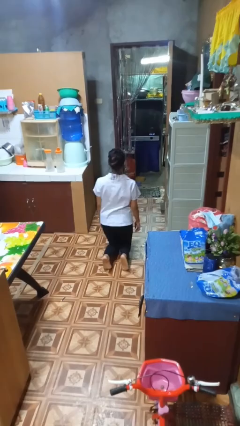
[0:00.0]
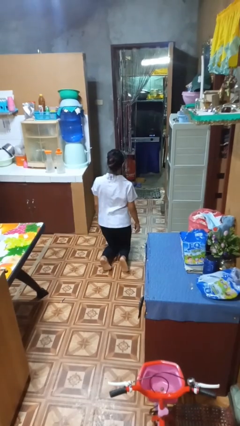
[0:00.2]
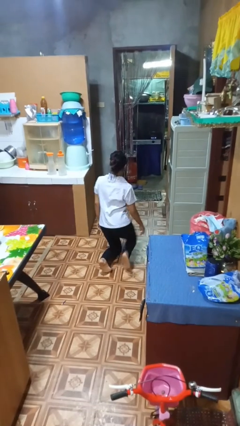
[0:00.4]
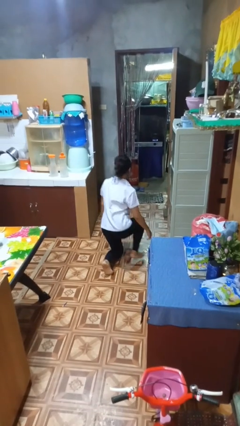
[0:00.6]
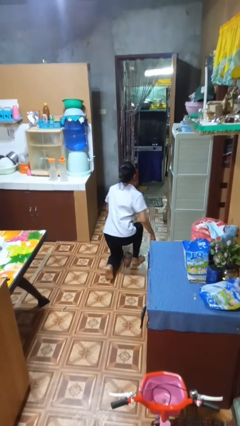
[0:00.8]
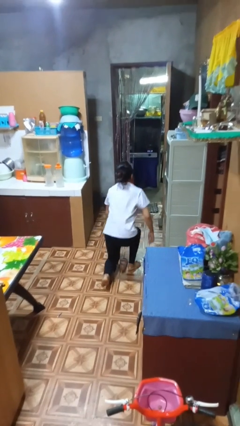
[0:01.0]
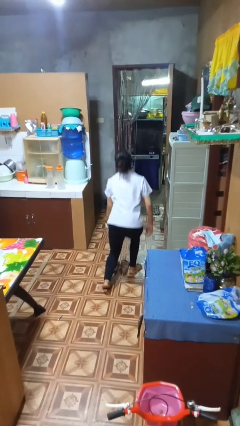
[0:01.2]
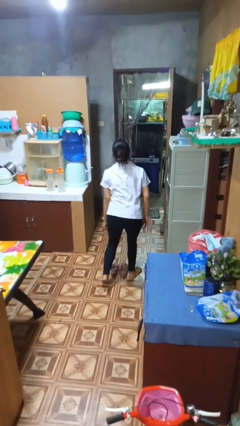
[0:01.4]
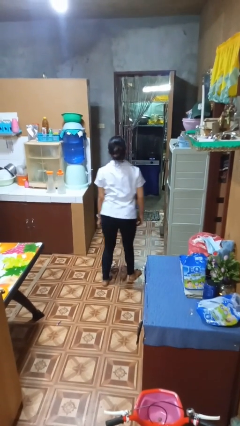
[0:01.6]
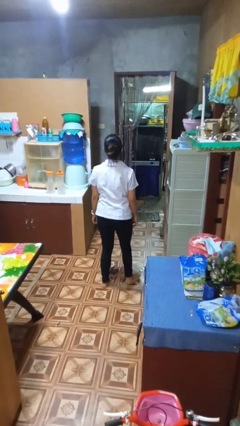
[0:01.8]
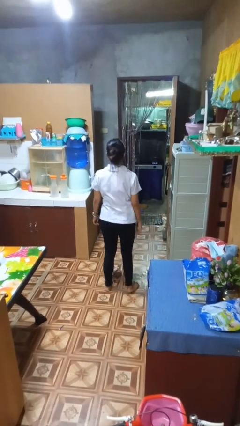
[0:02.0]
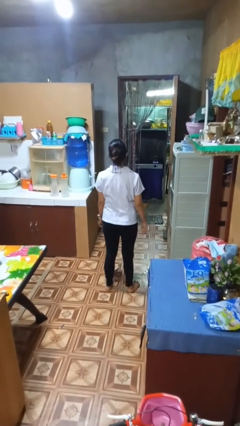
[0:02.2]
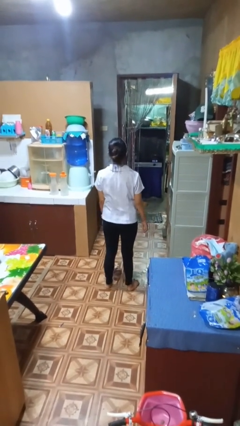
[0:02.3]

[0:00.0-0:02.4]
person stands up from floor

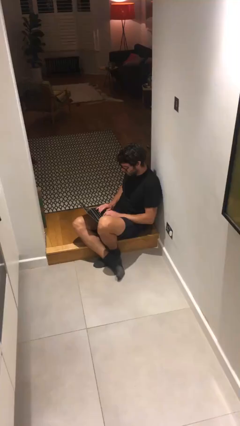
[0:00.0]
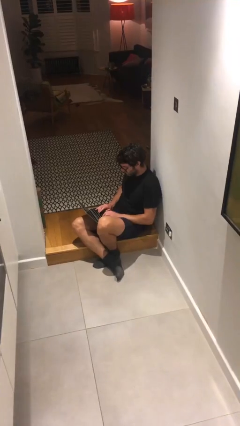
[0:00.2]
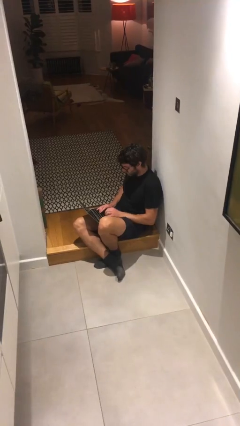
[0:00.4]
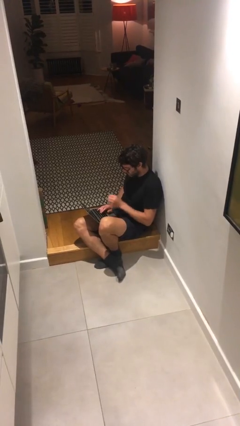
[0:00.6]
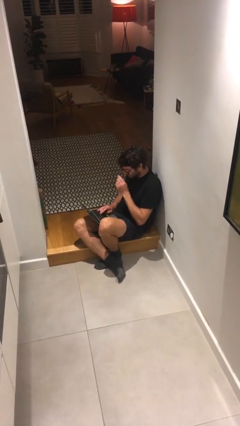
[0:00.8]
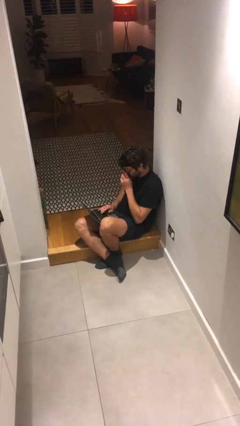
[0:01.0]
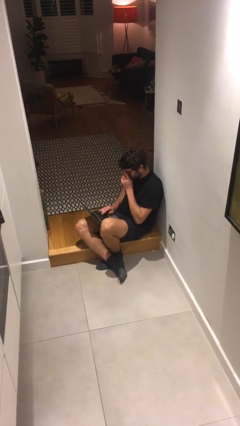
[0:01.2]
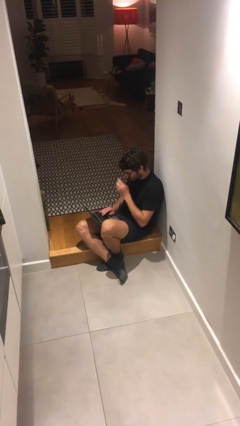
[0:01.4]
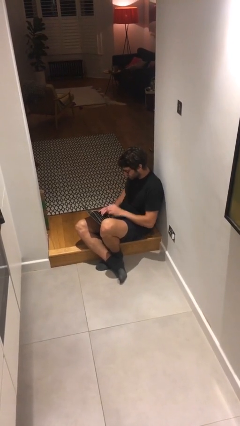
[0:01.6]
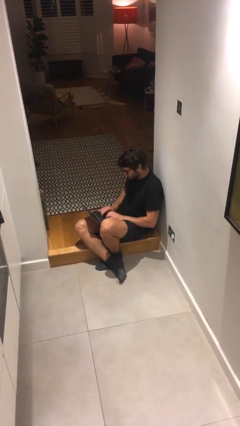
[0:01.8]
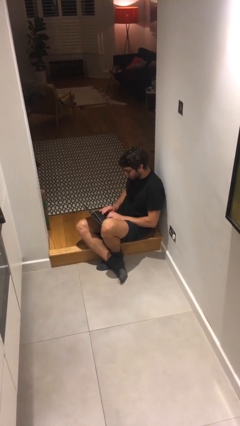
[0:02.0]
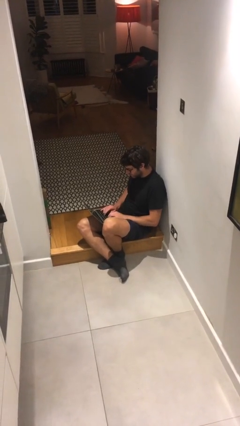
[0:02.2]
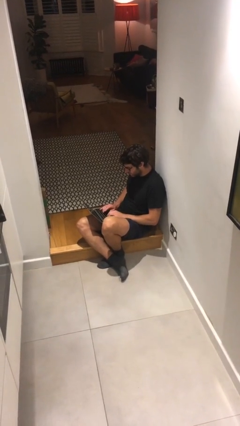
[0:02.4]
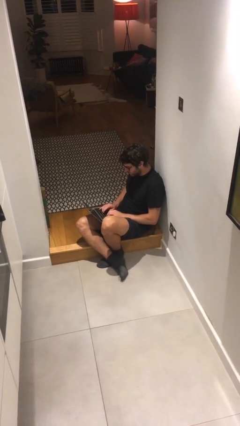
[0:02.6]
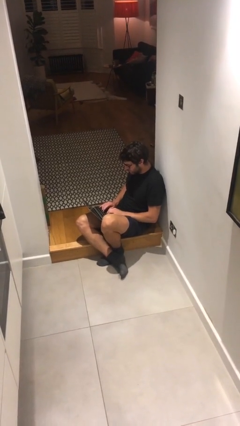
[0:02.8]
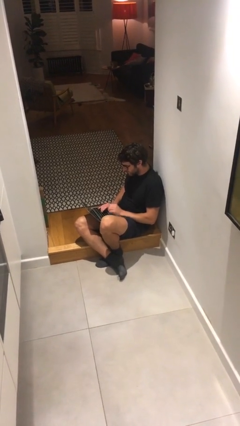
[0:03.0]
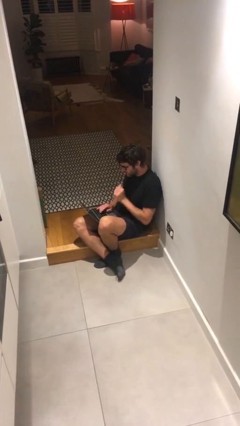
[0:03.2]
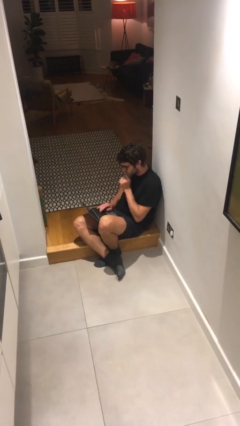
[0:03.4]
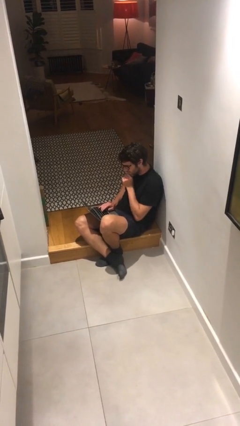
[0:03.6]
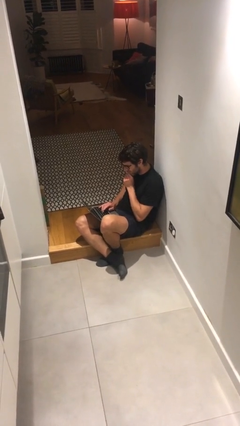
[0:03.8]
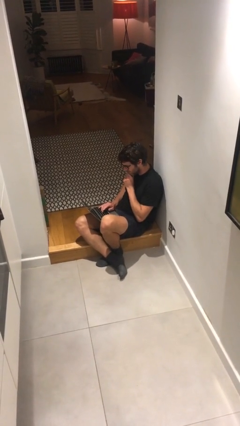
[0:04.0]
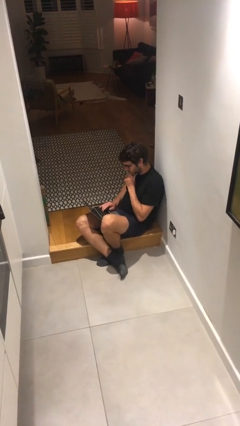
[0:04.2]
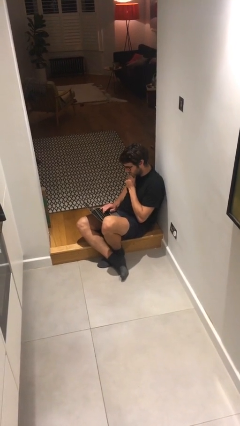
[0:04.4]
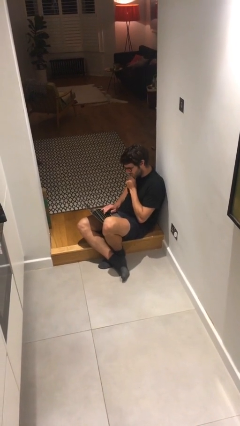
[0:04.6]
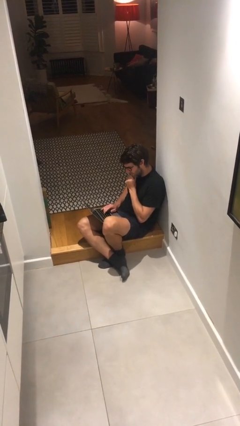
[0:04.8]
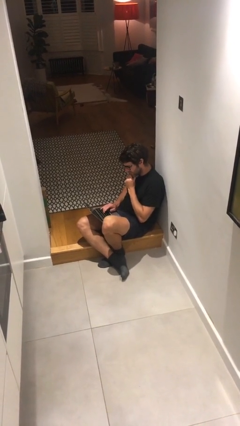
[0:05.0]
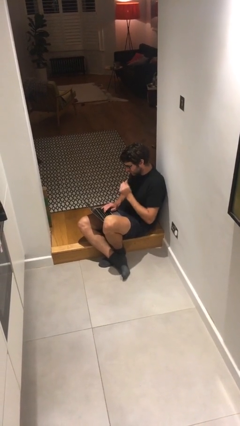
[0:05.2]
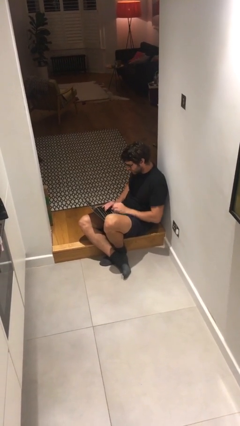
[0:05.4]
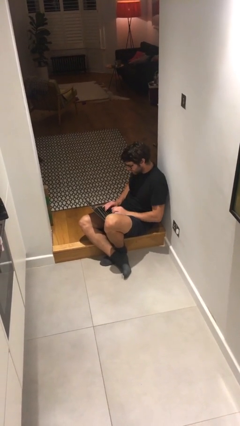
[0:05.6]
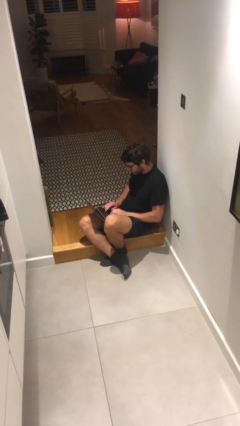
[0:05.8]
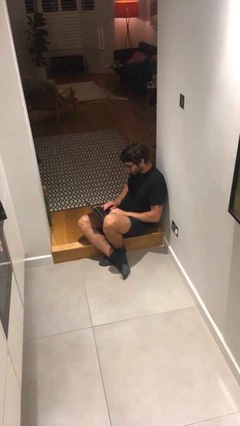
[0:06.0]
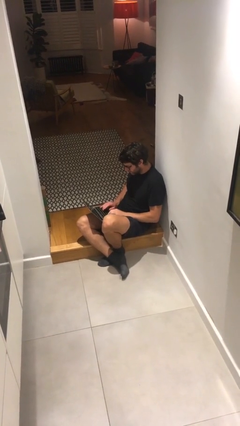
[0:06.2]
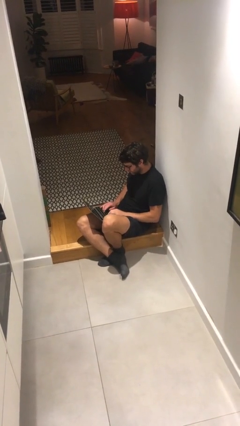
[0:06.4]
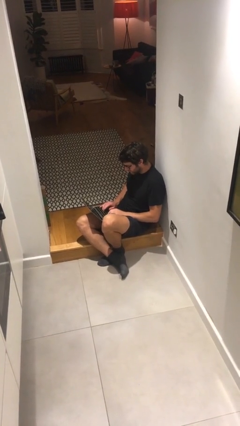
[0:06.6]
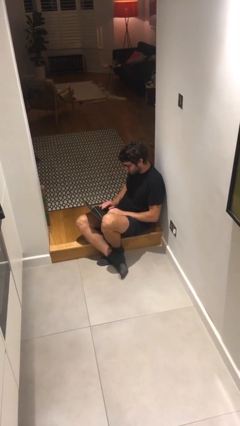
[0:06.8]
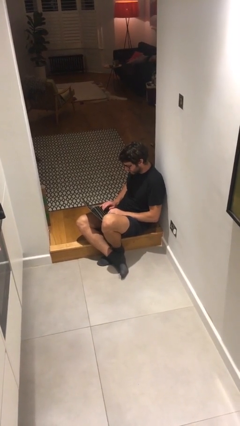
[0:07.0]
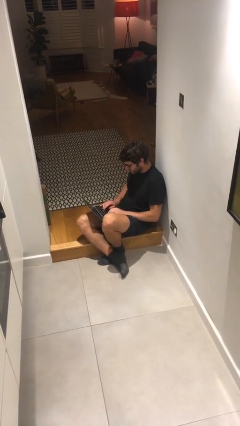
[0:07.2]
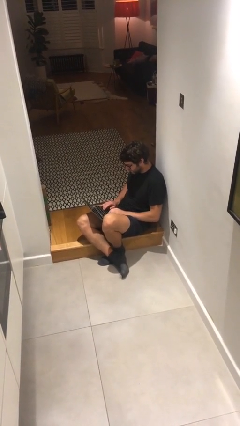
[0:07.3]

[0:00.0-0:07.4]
person interacts with laptop

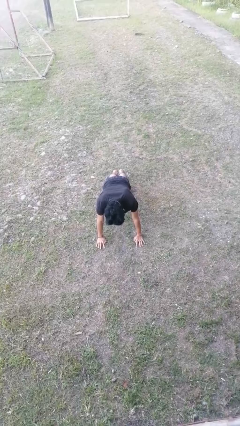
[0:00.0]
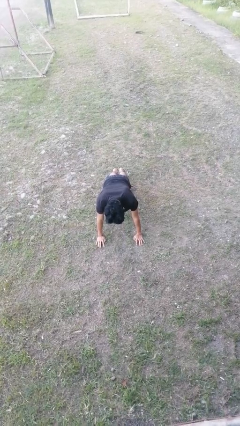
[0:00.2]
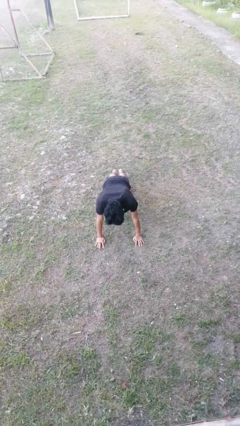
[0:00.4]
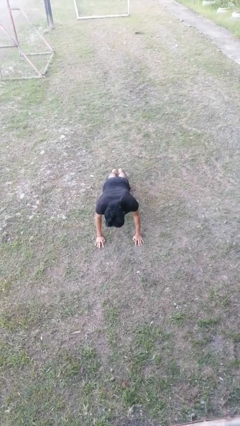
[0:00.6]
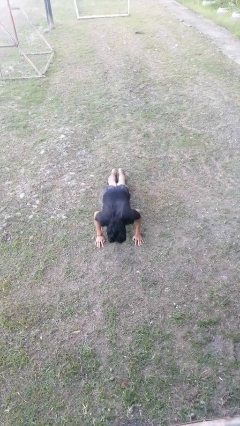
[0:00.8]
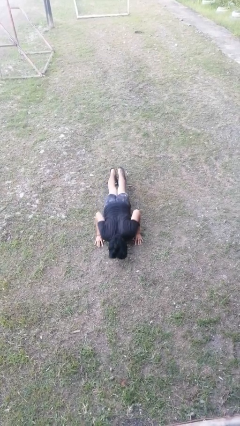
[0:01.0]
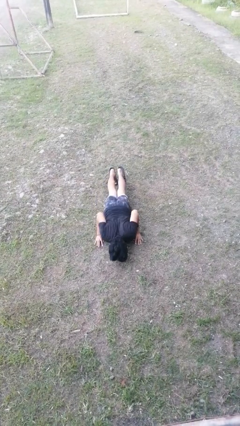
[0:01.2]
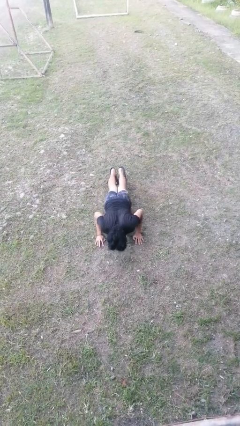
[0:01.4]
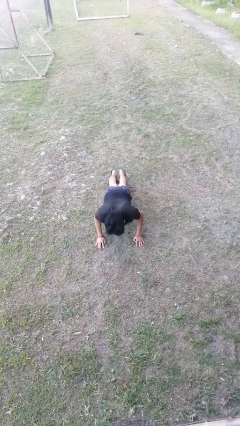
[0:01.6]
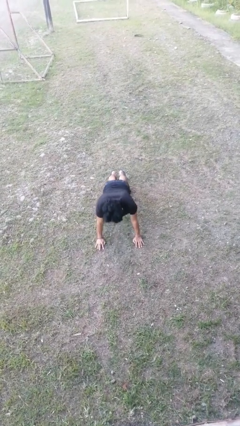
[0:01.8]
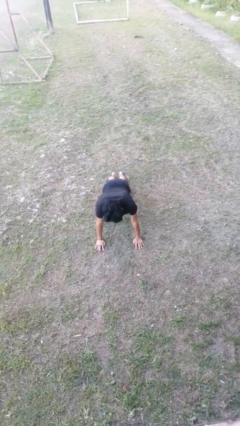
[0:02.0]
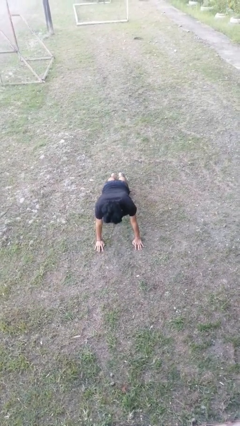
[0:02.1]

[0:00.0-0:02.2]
person exercises with pushup

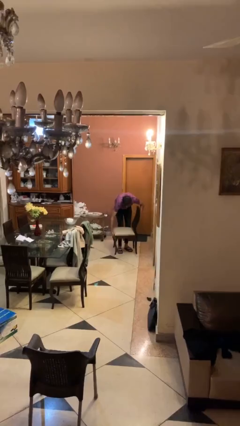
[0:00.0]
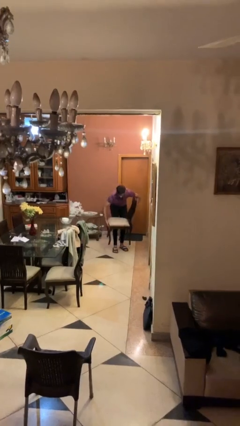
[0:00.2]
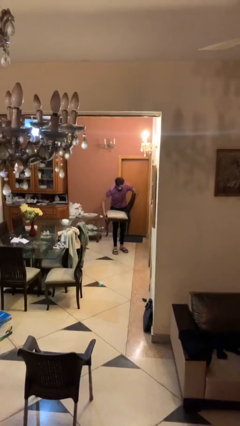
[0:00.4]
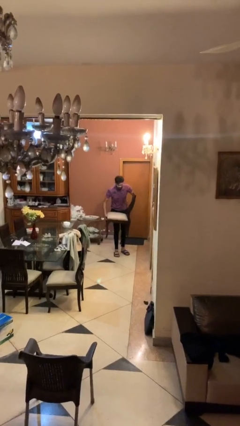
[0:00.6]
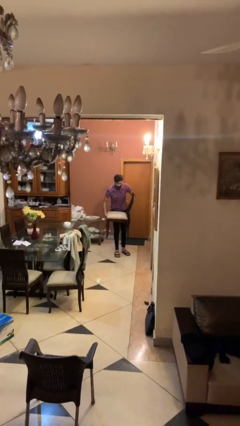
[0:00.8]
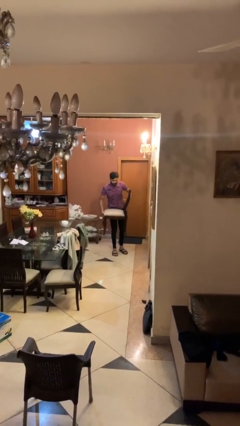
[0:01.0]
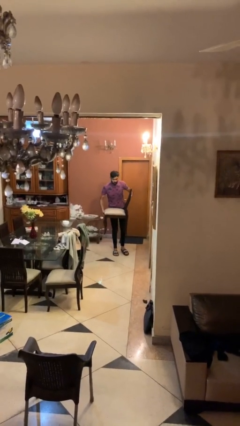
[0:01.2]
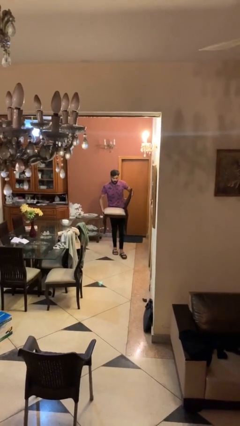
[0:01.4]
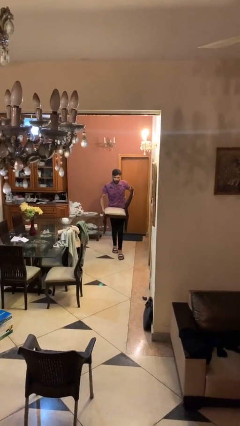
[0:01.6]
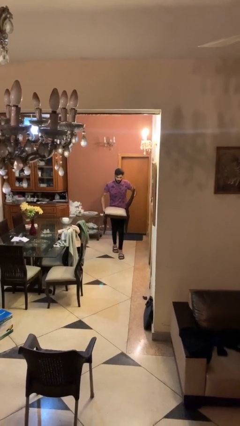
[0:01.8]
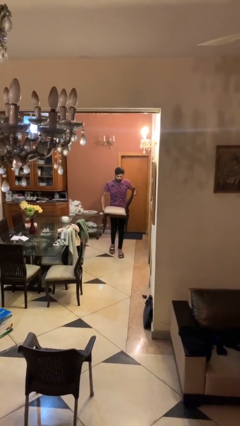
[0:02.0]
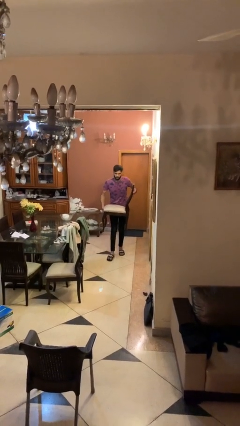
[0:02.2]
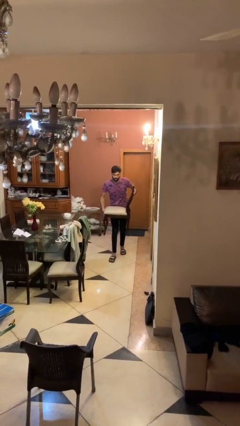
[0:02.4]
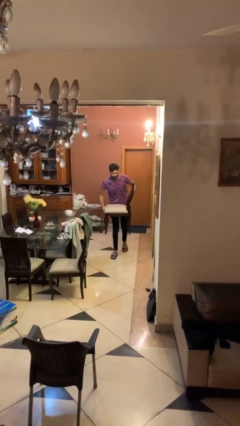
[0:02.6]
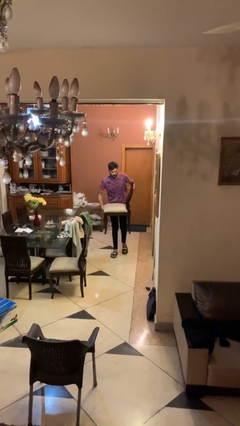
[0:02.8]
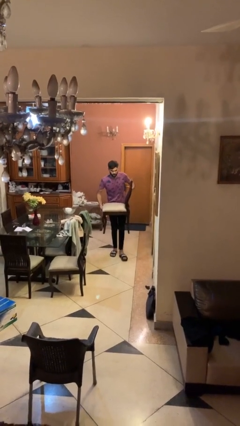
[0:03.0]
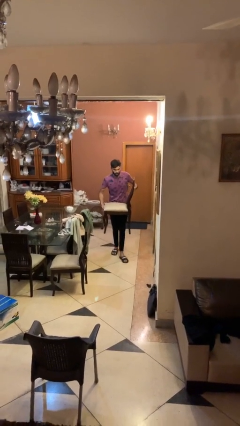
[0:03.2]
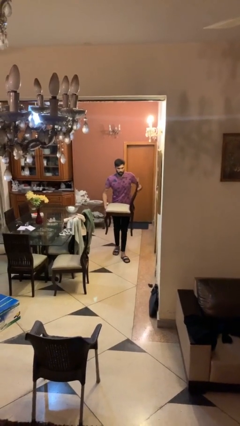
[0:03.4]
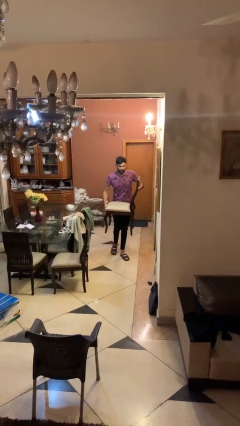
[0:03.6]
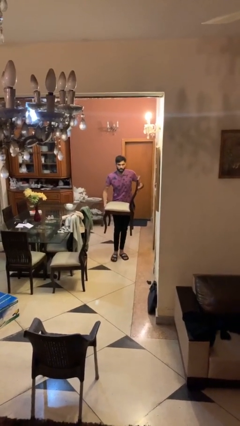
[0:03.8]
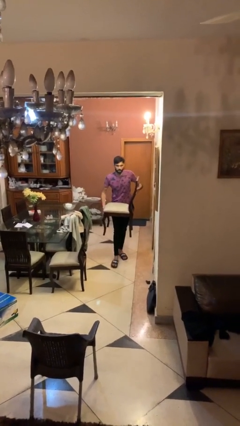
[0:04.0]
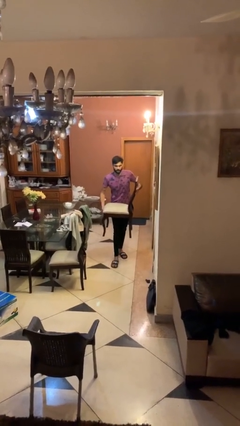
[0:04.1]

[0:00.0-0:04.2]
person carries heavy object

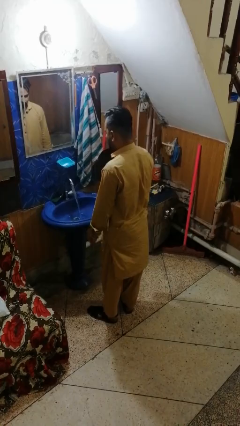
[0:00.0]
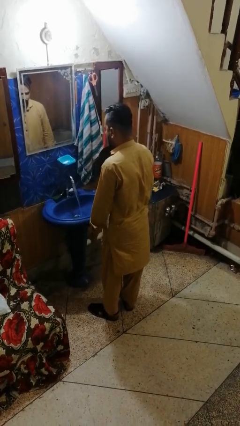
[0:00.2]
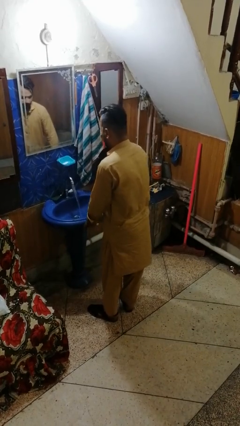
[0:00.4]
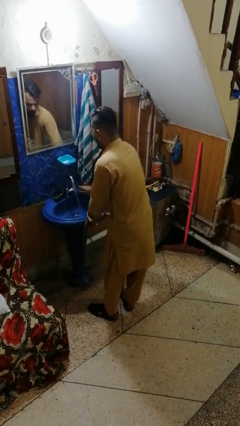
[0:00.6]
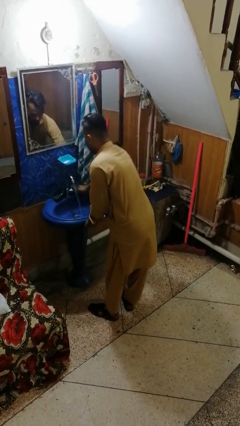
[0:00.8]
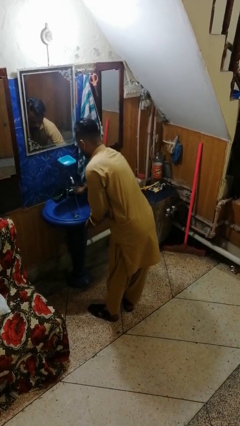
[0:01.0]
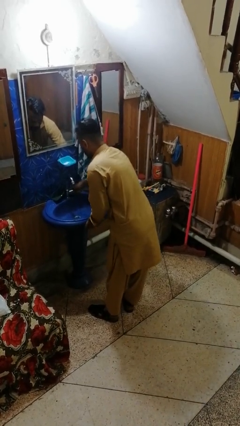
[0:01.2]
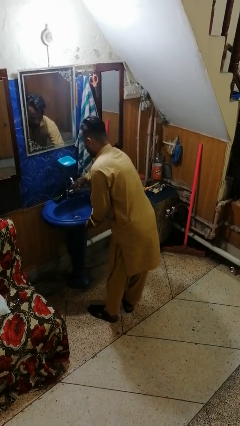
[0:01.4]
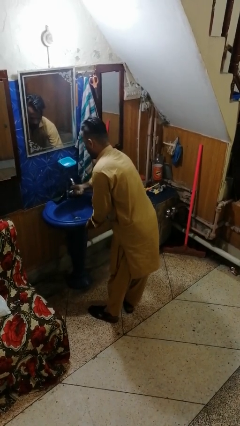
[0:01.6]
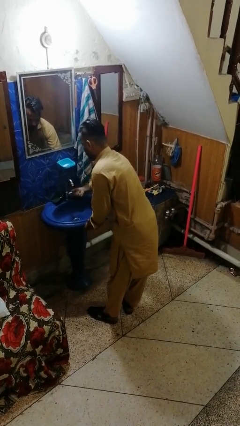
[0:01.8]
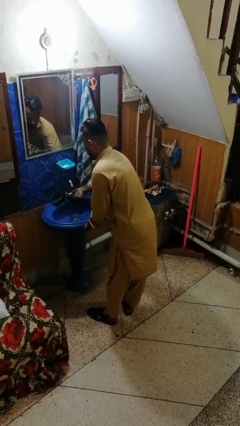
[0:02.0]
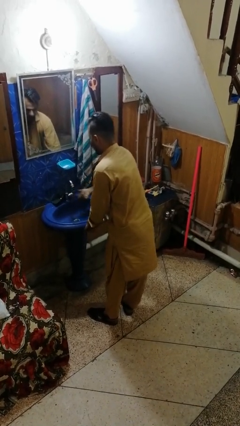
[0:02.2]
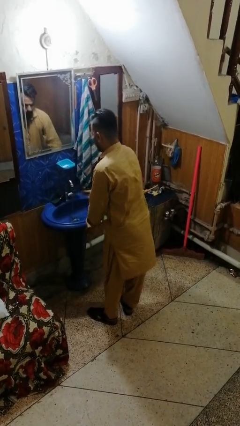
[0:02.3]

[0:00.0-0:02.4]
person turns off faucet
